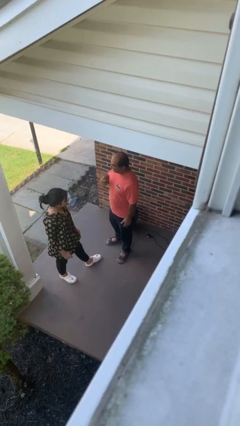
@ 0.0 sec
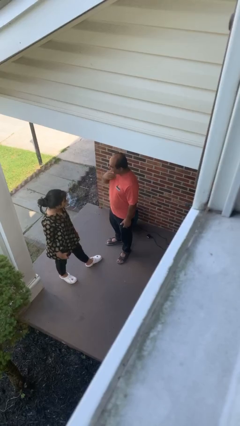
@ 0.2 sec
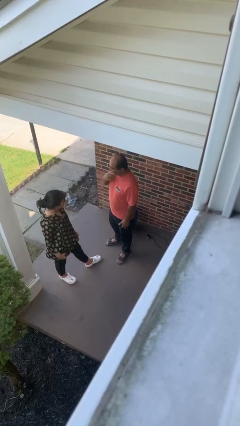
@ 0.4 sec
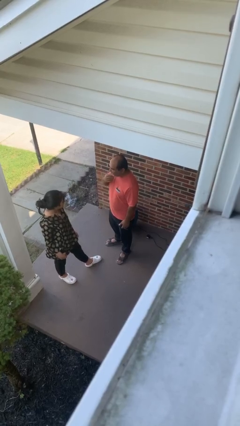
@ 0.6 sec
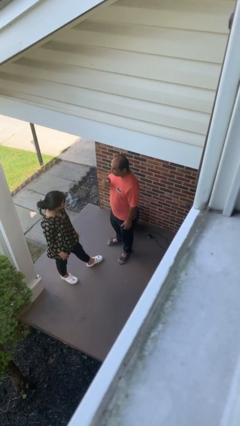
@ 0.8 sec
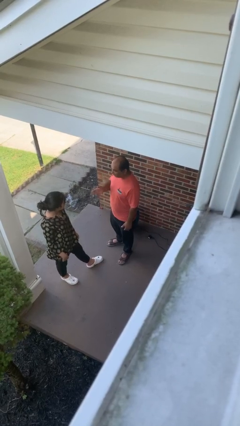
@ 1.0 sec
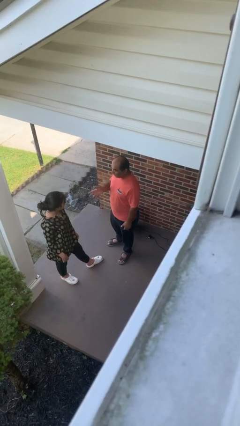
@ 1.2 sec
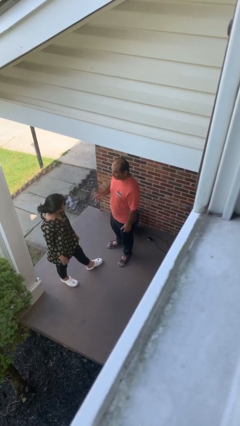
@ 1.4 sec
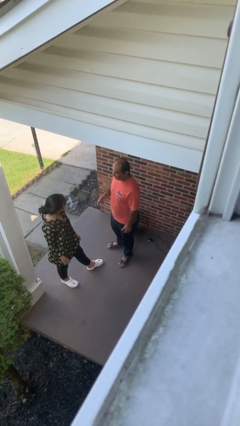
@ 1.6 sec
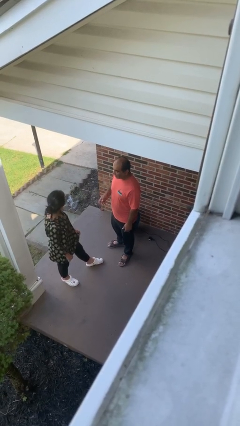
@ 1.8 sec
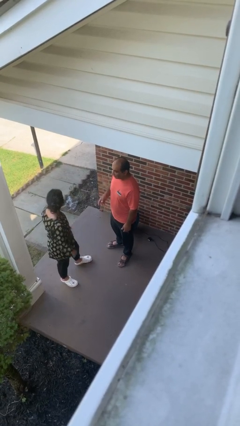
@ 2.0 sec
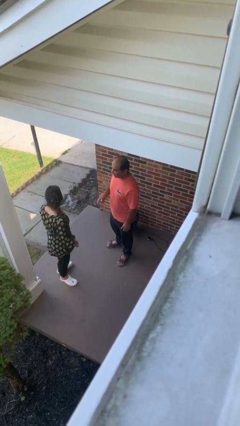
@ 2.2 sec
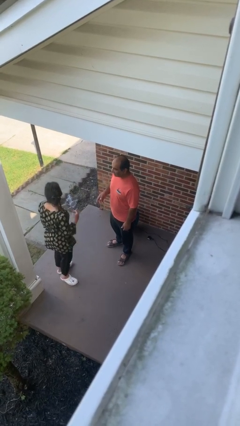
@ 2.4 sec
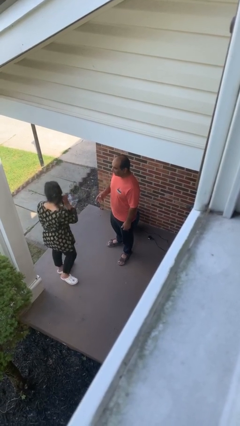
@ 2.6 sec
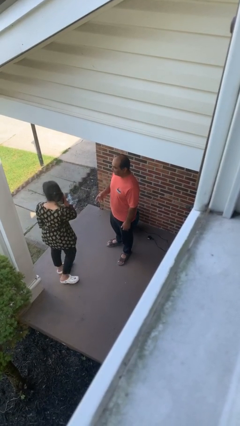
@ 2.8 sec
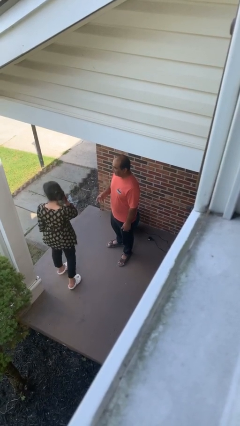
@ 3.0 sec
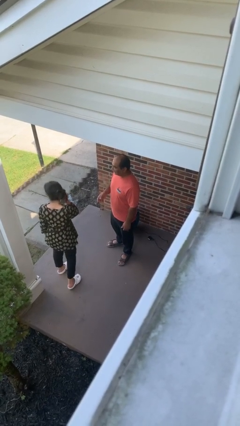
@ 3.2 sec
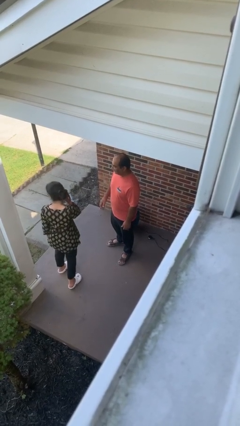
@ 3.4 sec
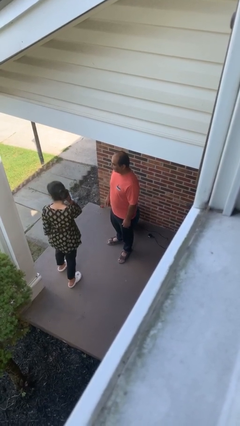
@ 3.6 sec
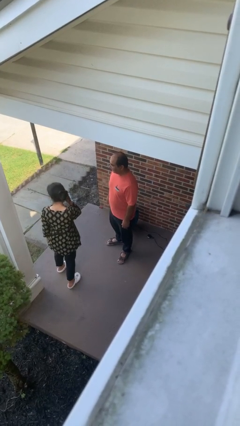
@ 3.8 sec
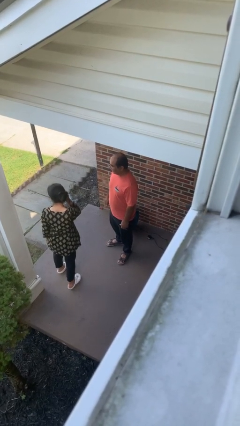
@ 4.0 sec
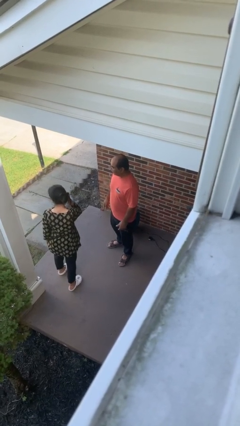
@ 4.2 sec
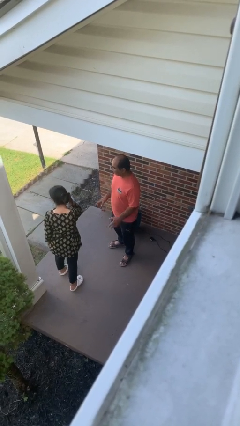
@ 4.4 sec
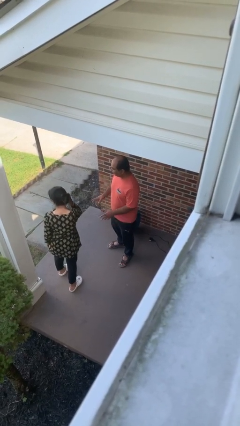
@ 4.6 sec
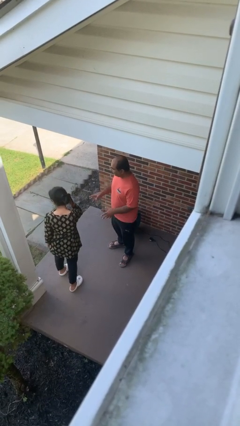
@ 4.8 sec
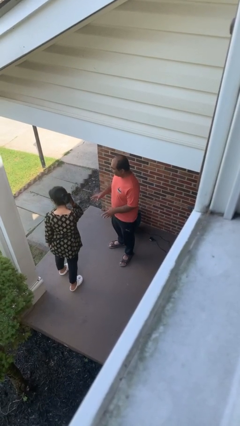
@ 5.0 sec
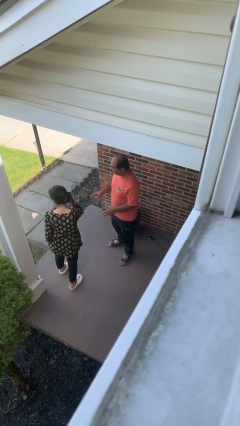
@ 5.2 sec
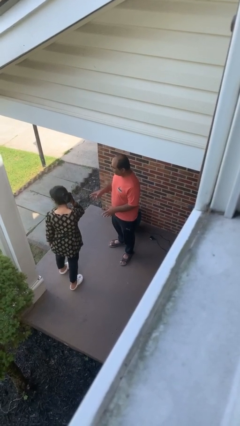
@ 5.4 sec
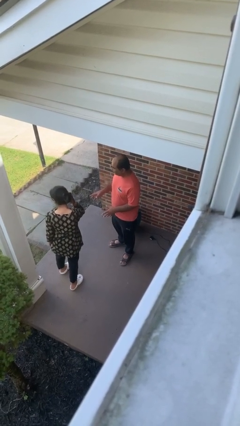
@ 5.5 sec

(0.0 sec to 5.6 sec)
person talks to person

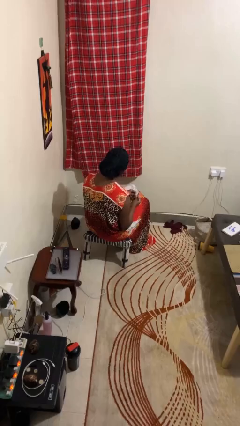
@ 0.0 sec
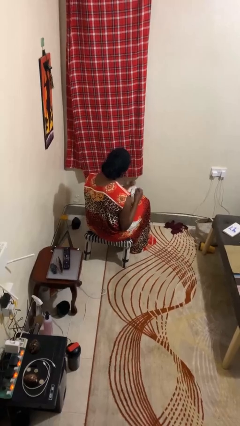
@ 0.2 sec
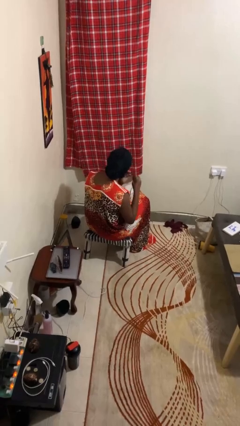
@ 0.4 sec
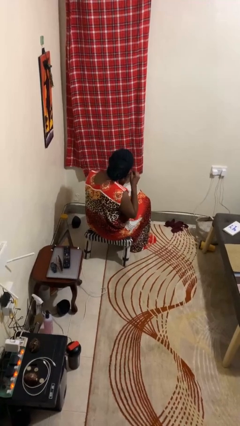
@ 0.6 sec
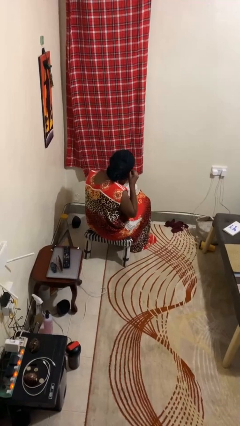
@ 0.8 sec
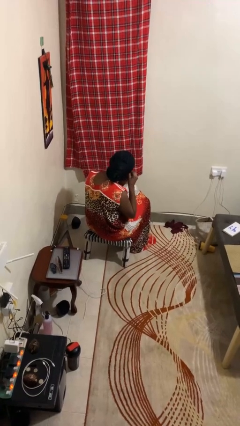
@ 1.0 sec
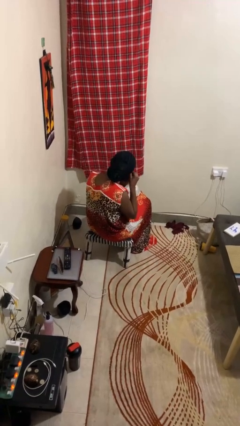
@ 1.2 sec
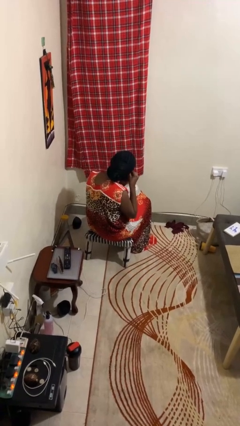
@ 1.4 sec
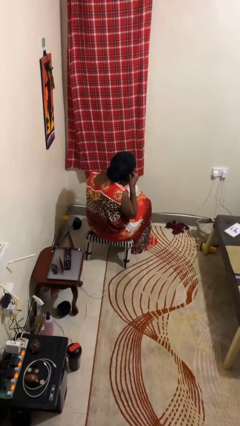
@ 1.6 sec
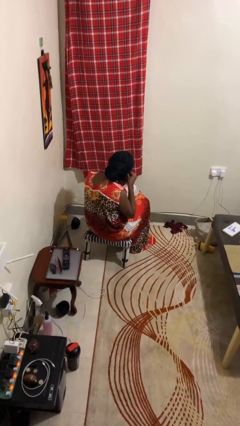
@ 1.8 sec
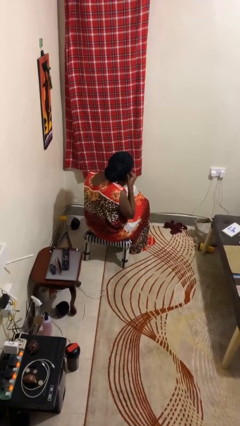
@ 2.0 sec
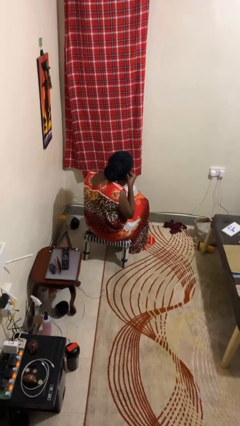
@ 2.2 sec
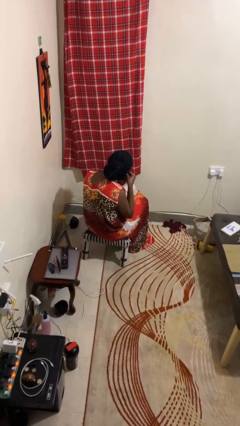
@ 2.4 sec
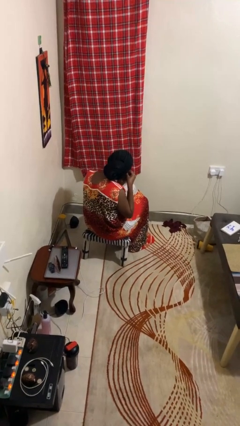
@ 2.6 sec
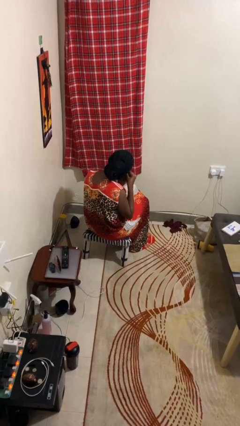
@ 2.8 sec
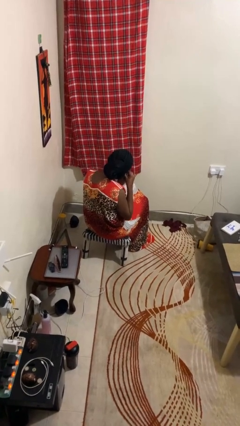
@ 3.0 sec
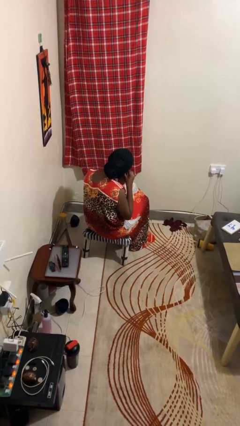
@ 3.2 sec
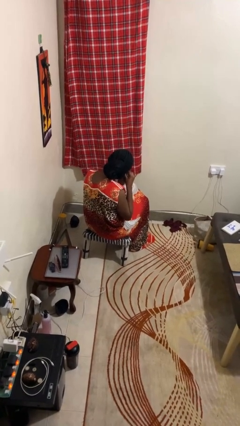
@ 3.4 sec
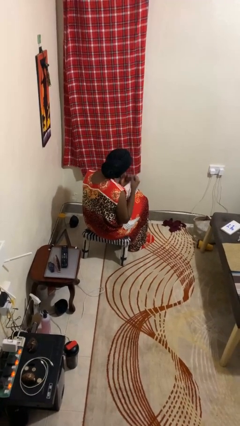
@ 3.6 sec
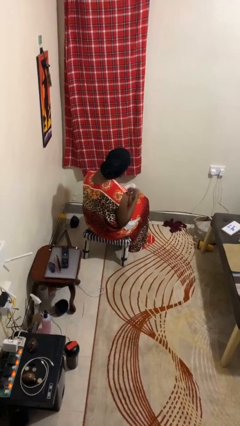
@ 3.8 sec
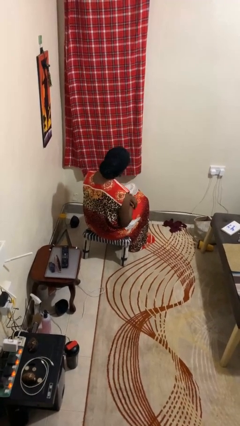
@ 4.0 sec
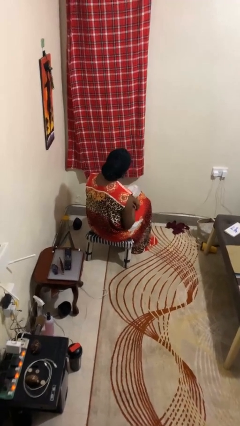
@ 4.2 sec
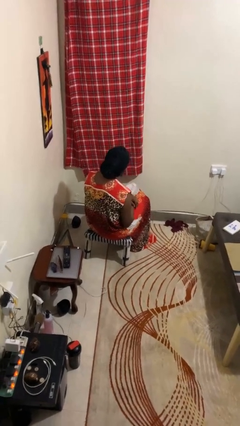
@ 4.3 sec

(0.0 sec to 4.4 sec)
person puts on earrings

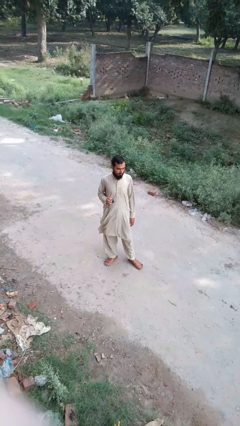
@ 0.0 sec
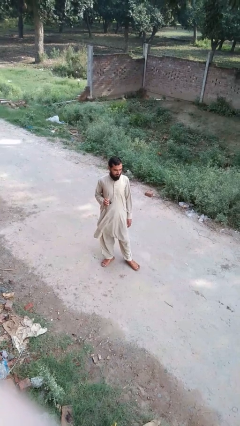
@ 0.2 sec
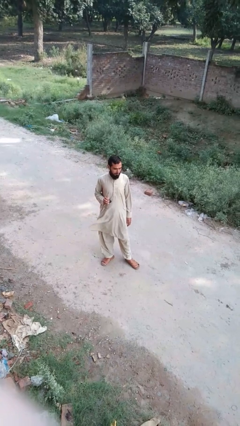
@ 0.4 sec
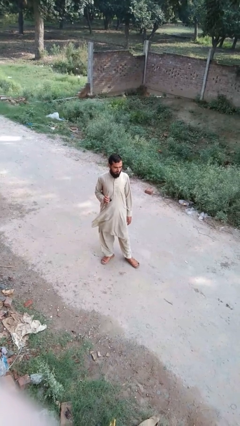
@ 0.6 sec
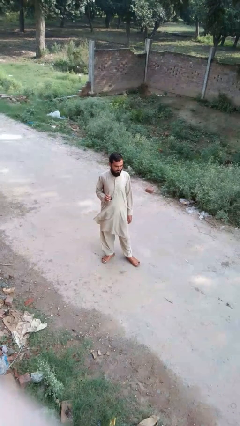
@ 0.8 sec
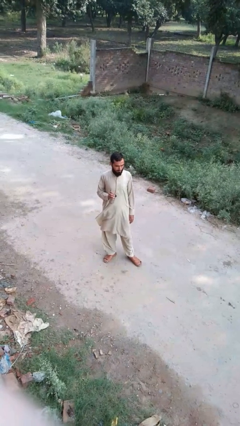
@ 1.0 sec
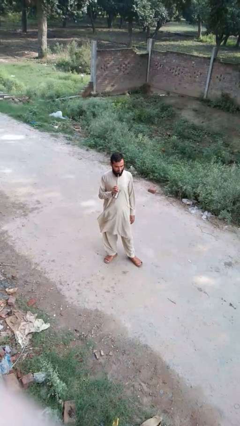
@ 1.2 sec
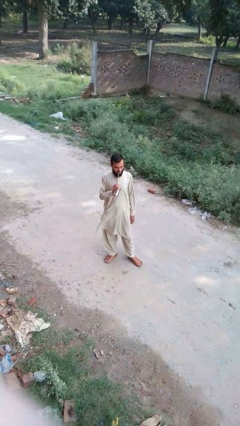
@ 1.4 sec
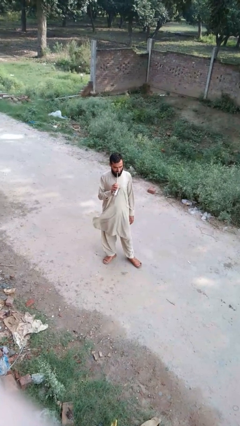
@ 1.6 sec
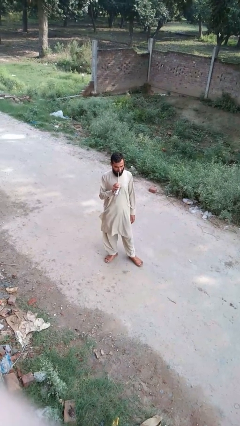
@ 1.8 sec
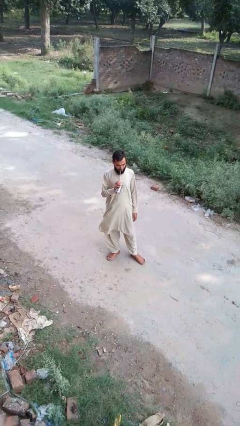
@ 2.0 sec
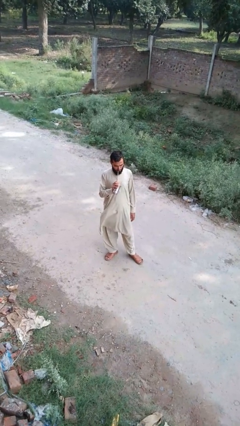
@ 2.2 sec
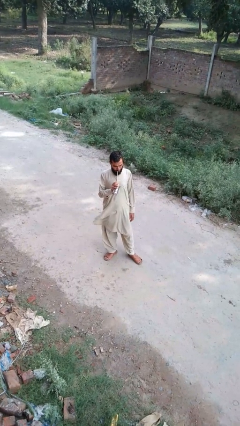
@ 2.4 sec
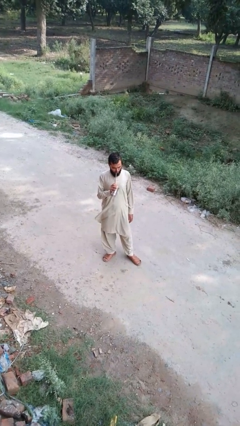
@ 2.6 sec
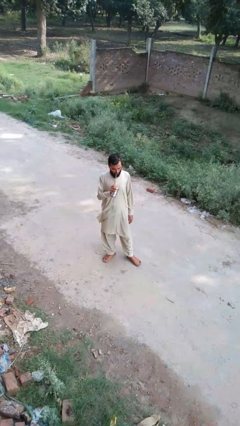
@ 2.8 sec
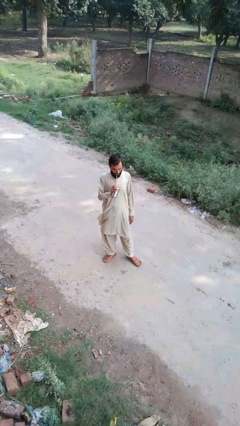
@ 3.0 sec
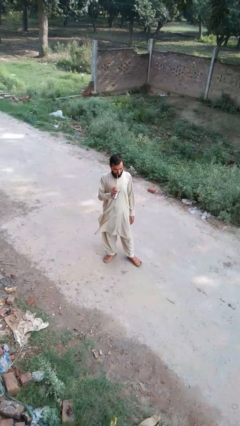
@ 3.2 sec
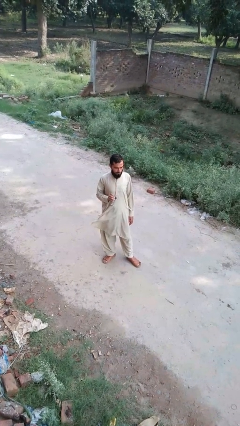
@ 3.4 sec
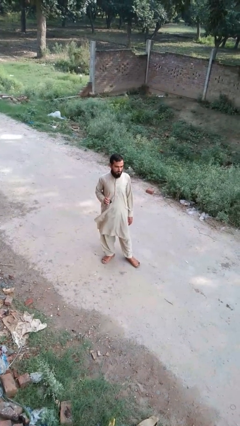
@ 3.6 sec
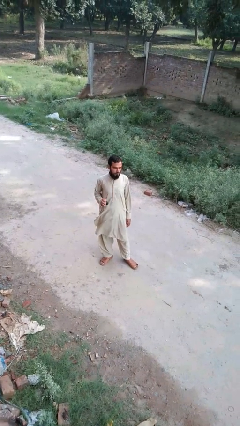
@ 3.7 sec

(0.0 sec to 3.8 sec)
person drinks from straw

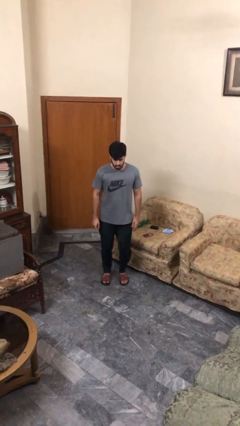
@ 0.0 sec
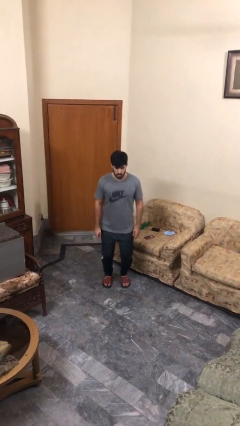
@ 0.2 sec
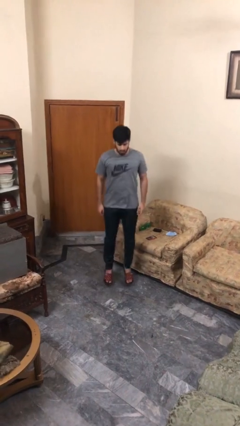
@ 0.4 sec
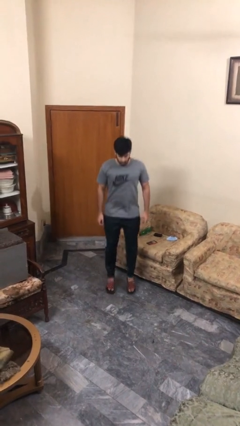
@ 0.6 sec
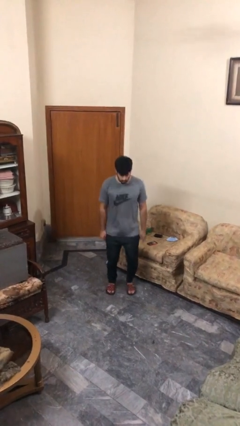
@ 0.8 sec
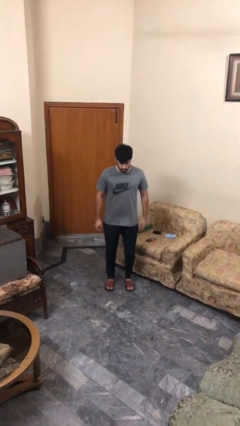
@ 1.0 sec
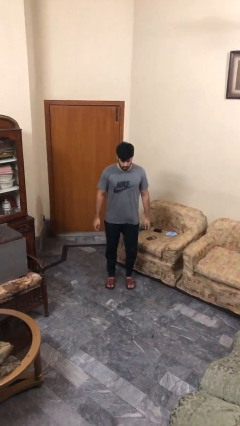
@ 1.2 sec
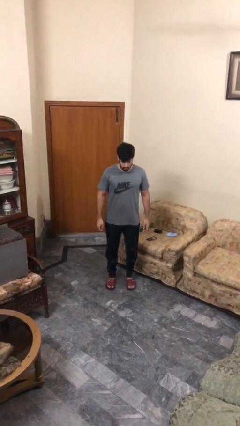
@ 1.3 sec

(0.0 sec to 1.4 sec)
person jumps

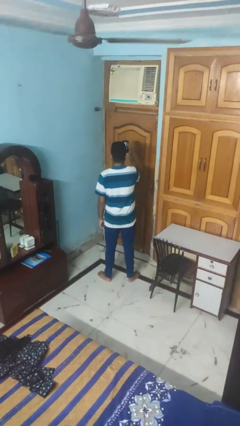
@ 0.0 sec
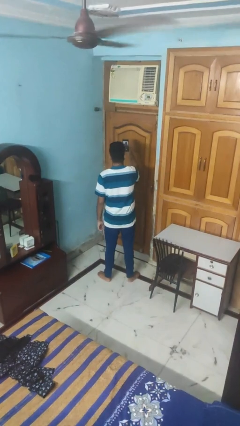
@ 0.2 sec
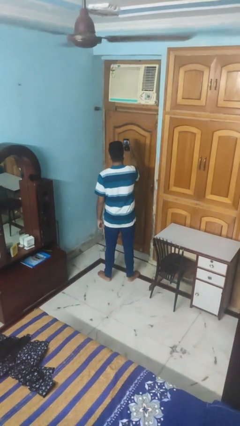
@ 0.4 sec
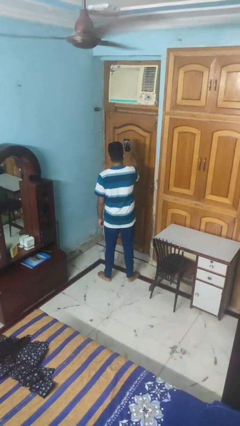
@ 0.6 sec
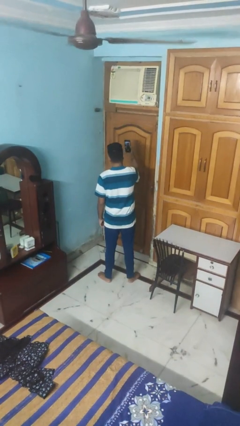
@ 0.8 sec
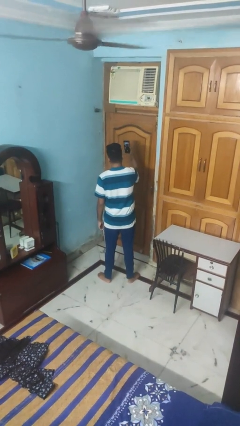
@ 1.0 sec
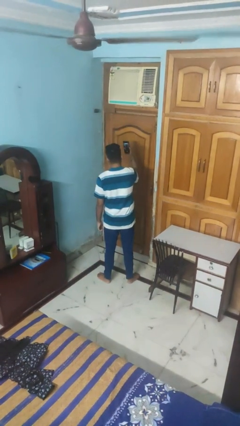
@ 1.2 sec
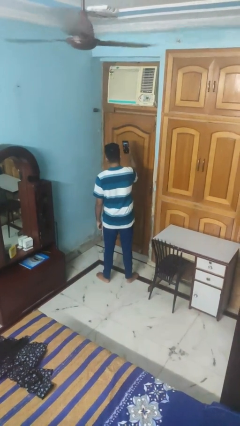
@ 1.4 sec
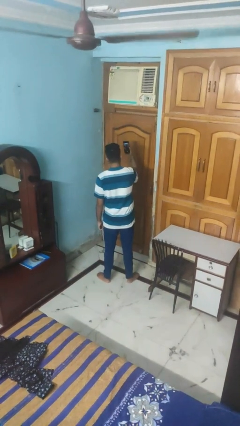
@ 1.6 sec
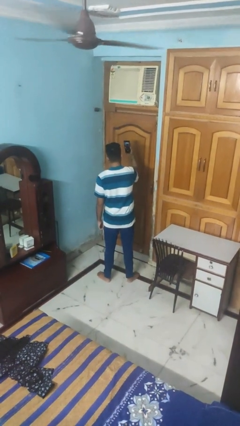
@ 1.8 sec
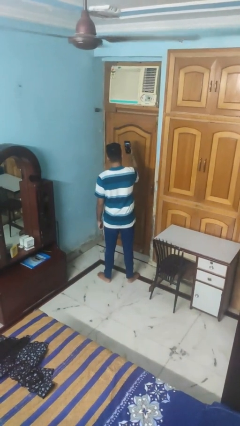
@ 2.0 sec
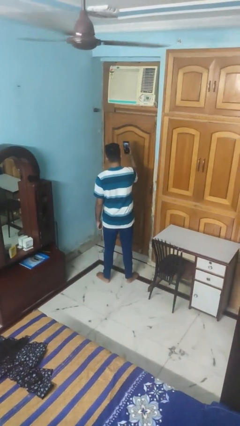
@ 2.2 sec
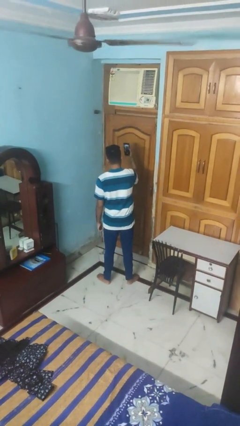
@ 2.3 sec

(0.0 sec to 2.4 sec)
person takes selfie

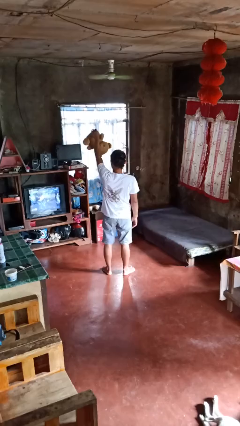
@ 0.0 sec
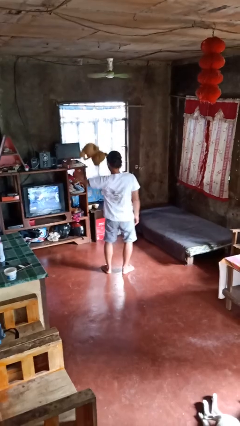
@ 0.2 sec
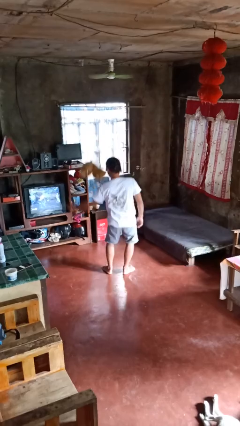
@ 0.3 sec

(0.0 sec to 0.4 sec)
person drops object
